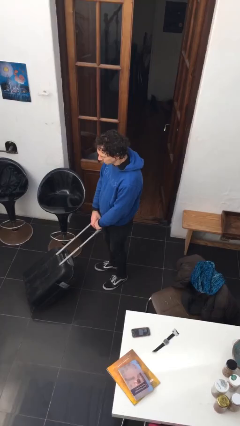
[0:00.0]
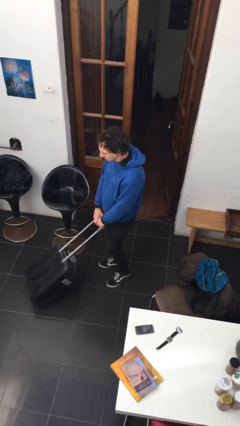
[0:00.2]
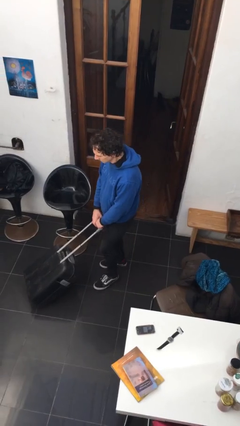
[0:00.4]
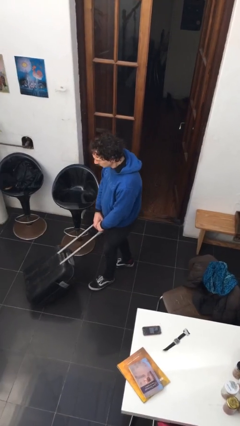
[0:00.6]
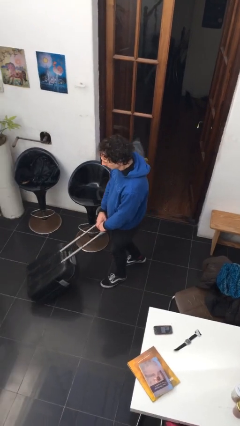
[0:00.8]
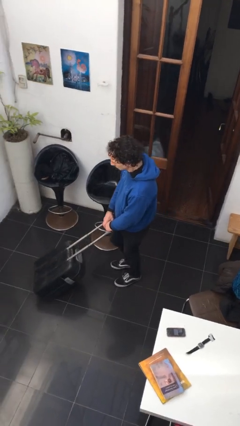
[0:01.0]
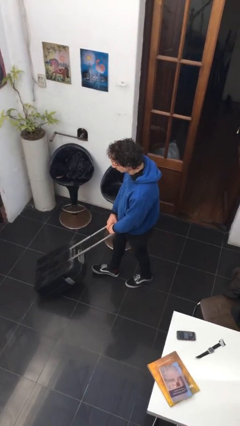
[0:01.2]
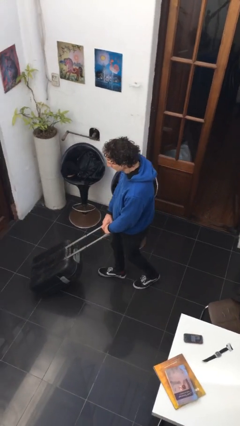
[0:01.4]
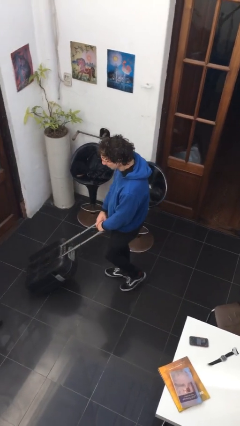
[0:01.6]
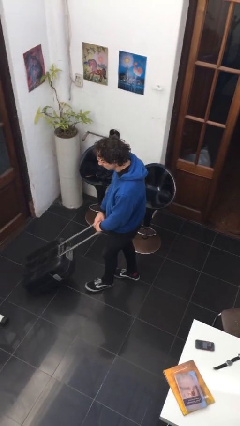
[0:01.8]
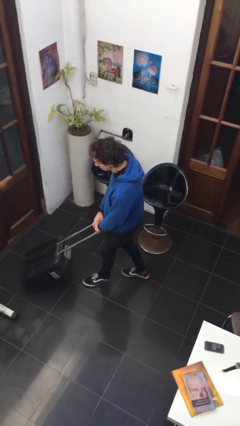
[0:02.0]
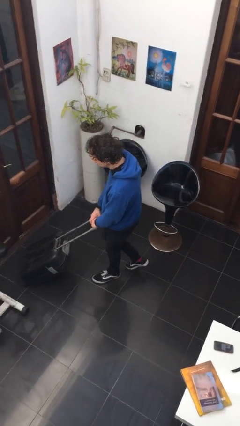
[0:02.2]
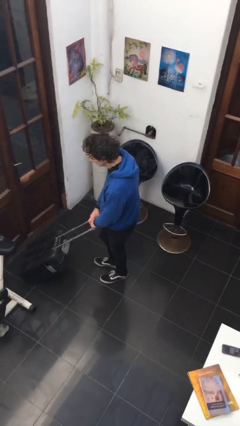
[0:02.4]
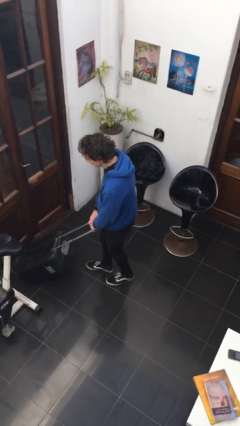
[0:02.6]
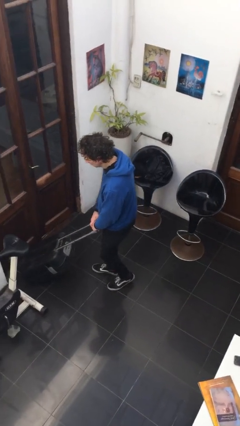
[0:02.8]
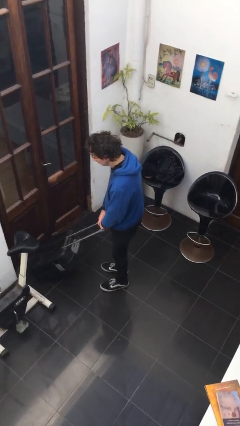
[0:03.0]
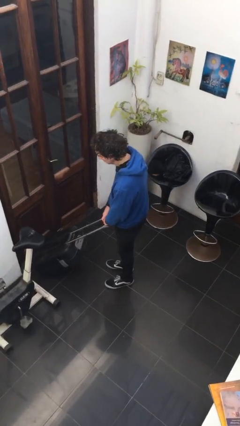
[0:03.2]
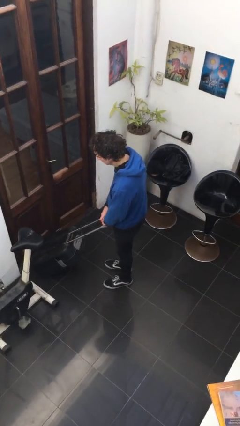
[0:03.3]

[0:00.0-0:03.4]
person pushes wheeled cart

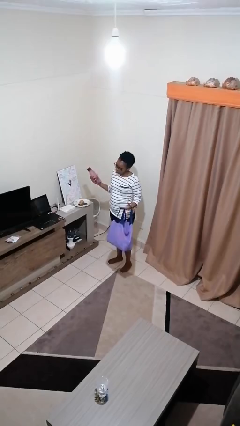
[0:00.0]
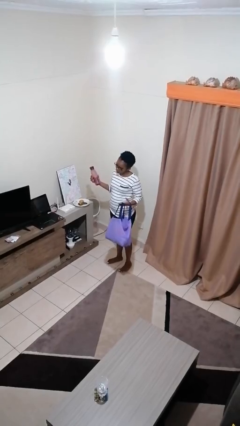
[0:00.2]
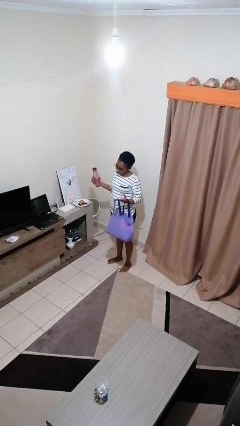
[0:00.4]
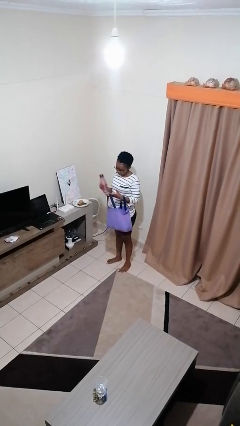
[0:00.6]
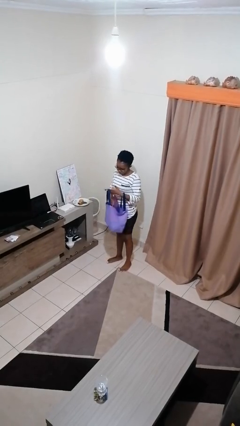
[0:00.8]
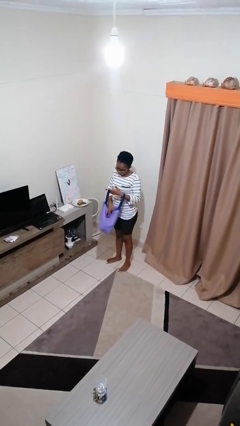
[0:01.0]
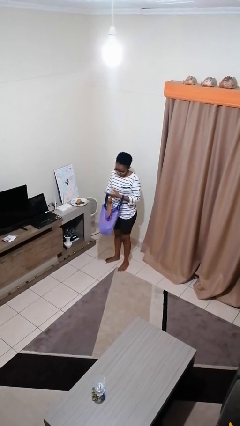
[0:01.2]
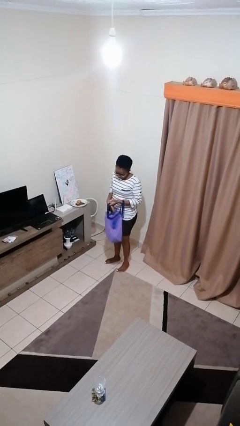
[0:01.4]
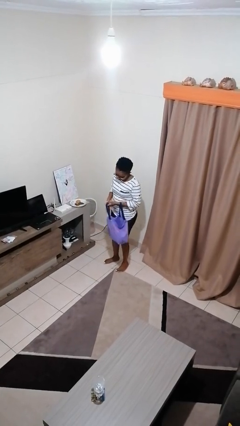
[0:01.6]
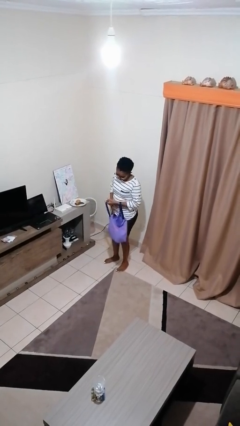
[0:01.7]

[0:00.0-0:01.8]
person puts object into bag

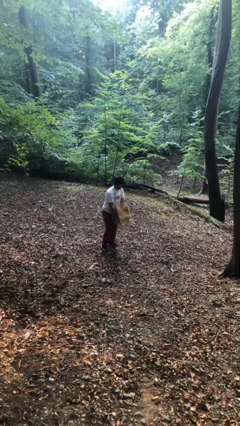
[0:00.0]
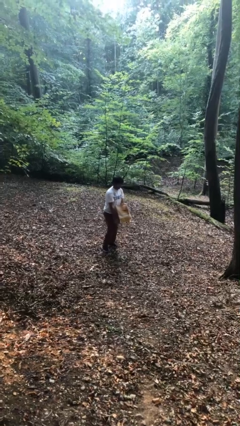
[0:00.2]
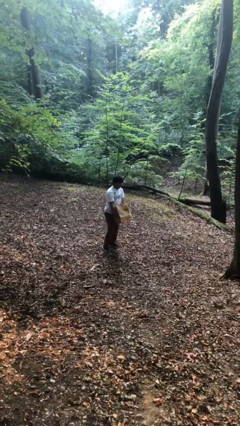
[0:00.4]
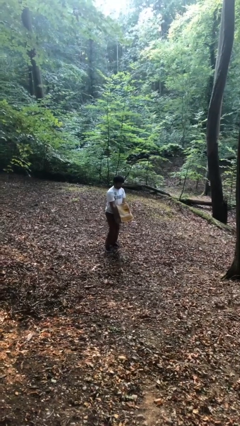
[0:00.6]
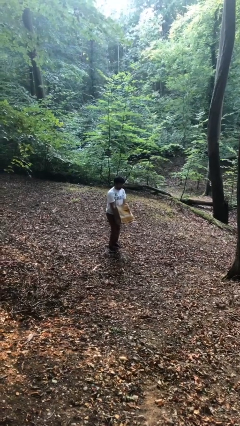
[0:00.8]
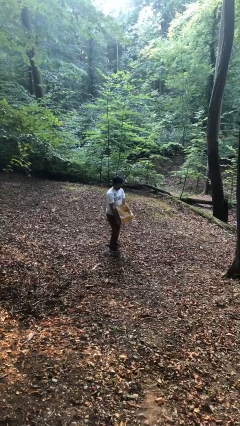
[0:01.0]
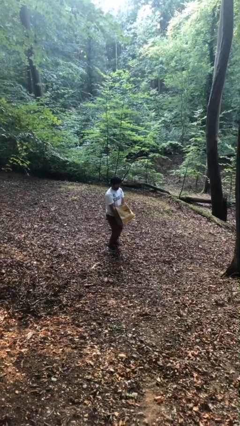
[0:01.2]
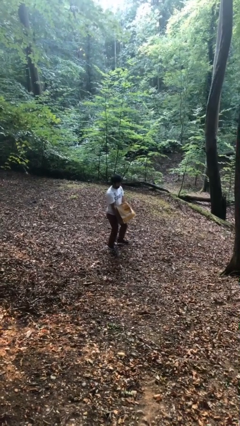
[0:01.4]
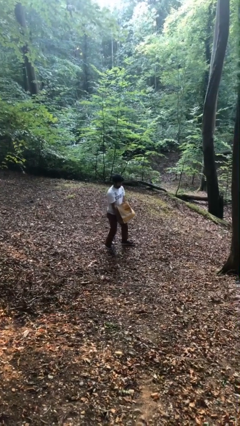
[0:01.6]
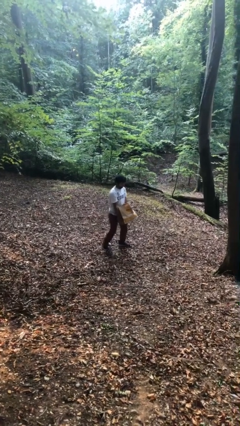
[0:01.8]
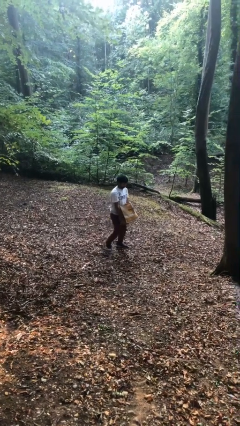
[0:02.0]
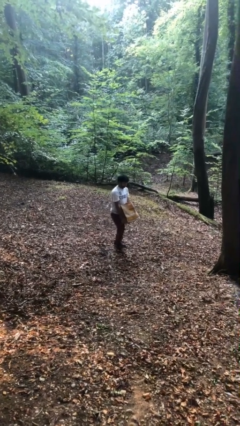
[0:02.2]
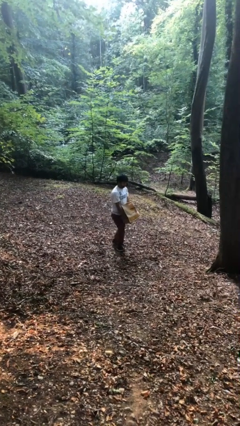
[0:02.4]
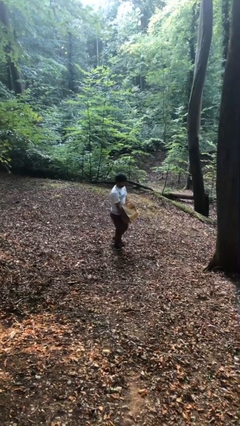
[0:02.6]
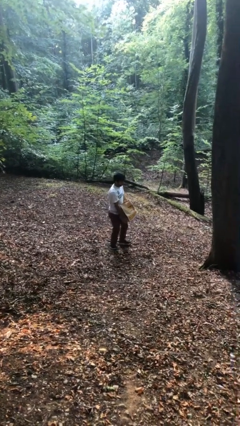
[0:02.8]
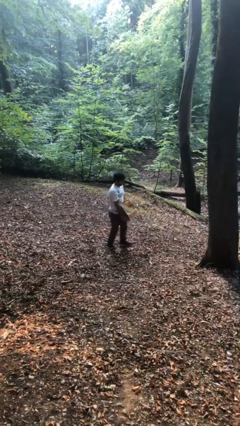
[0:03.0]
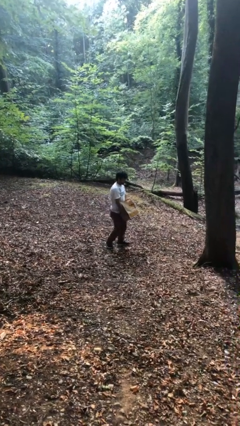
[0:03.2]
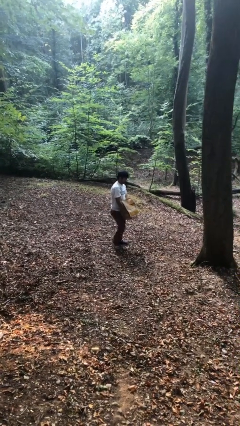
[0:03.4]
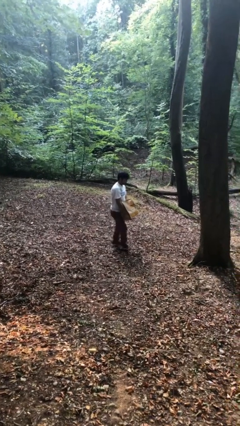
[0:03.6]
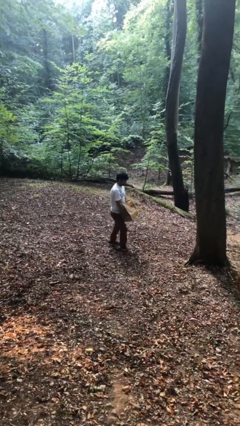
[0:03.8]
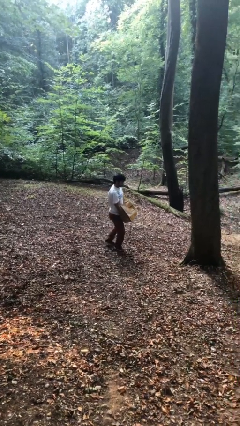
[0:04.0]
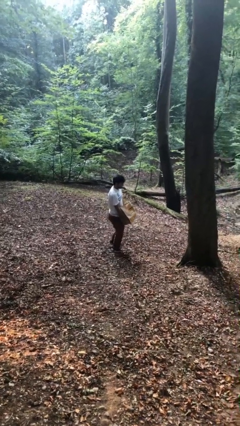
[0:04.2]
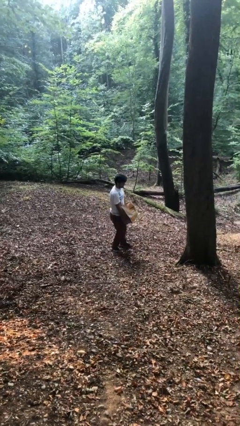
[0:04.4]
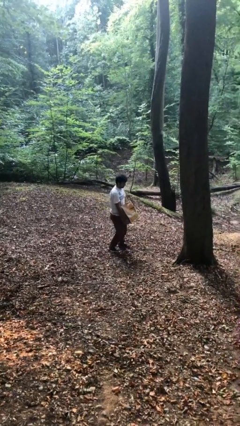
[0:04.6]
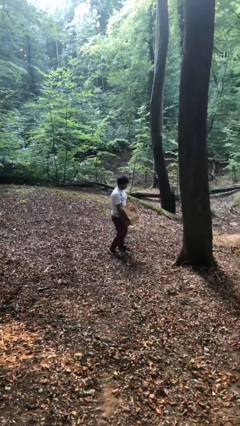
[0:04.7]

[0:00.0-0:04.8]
person carries heavy object

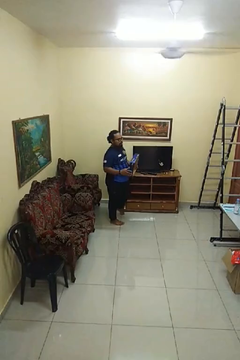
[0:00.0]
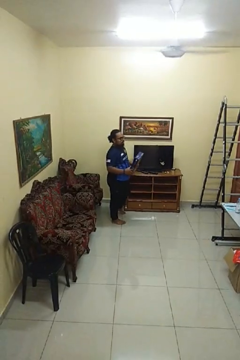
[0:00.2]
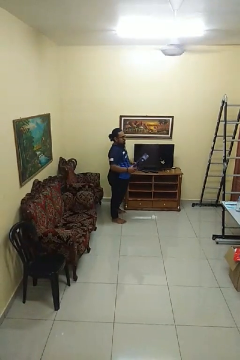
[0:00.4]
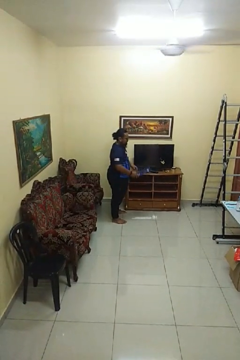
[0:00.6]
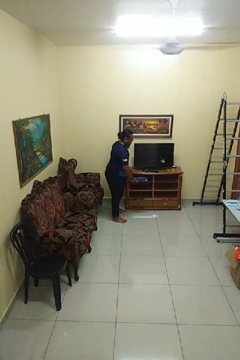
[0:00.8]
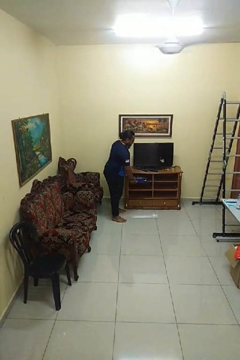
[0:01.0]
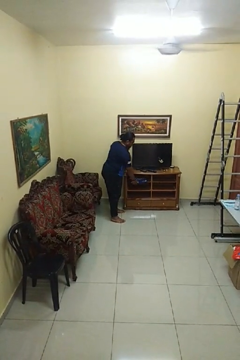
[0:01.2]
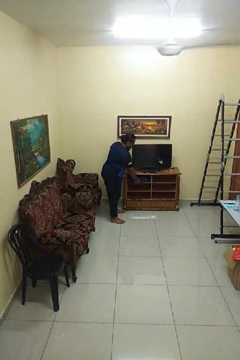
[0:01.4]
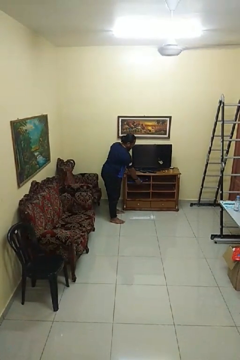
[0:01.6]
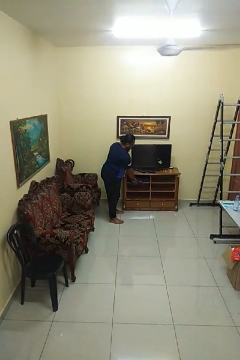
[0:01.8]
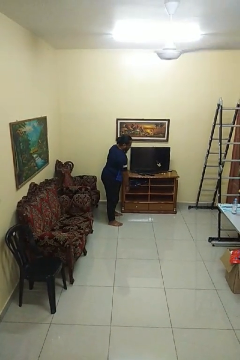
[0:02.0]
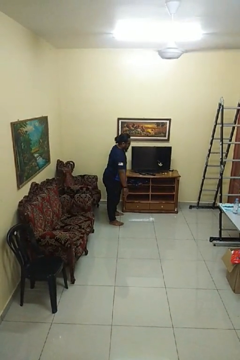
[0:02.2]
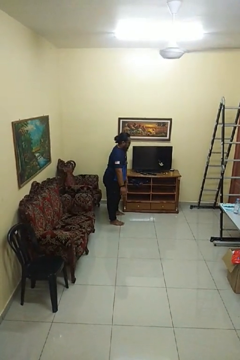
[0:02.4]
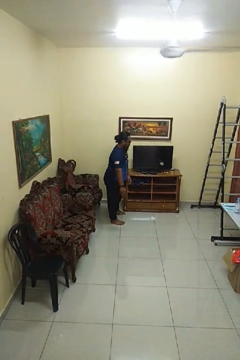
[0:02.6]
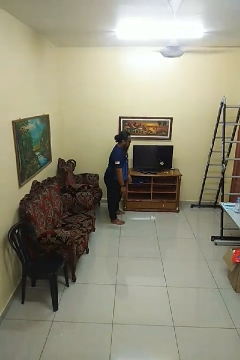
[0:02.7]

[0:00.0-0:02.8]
person puts down object into cabinet

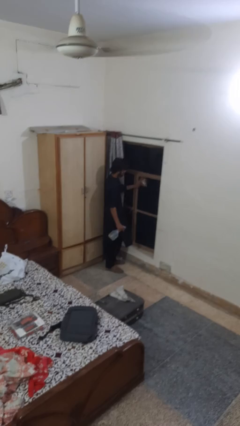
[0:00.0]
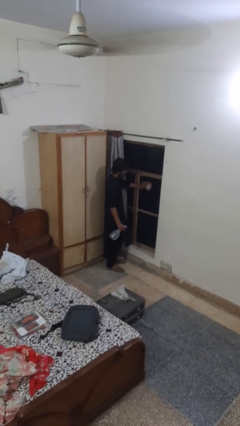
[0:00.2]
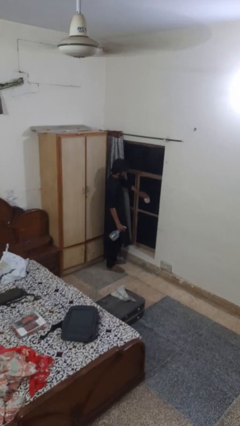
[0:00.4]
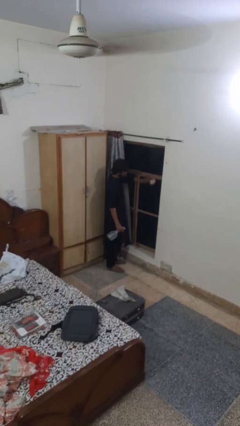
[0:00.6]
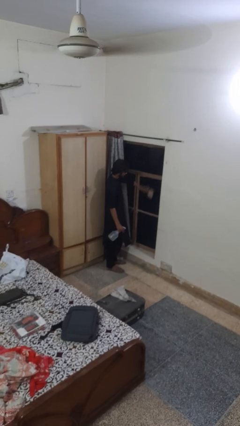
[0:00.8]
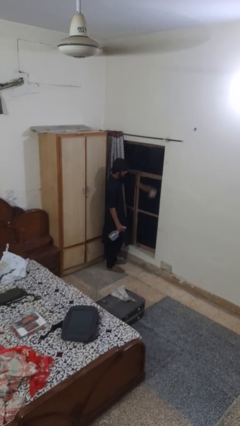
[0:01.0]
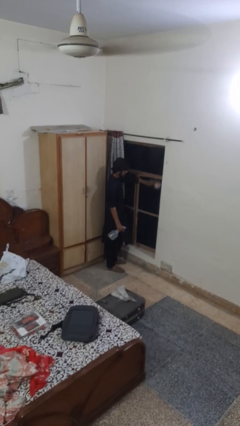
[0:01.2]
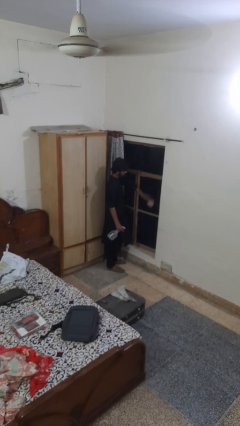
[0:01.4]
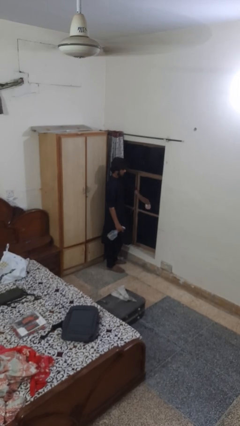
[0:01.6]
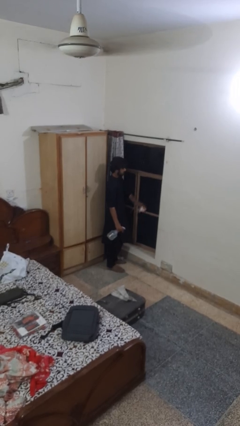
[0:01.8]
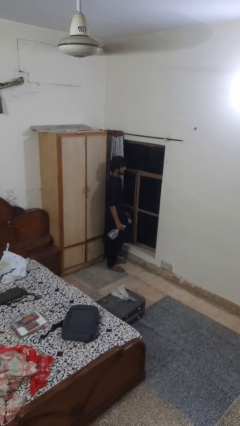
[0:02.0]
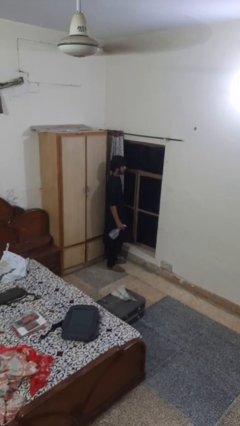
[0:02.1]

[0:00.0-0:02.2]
person washes window

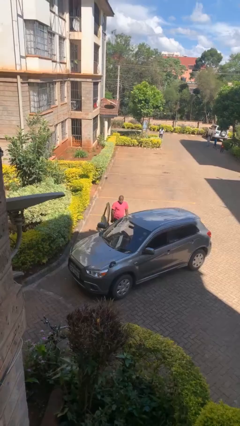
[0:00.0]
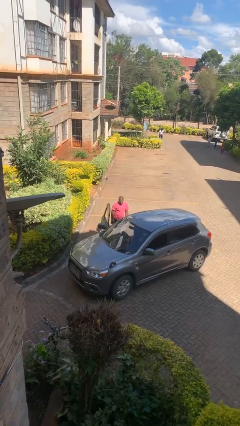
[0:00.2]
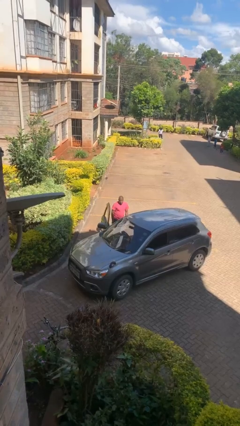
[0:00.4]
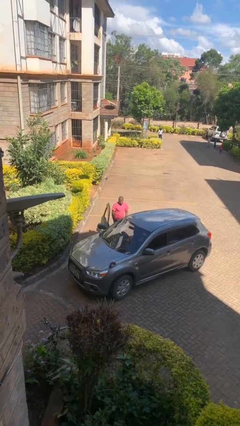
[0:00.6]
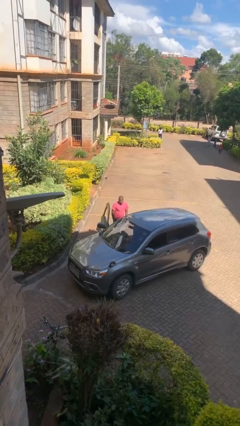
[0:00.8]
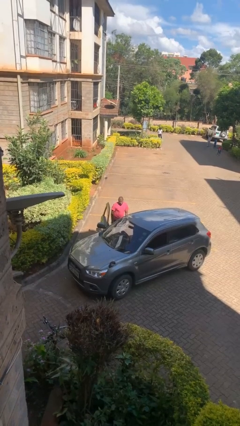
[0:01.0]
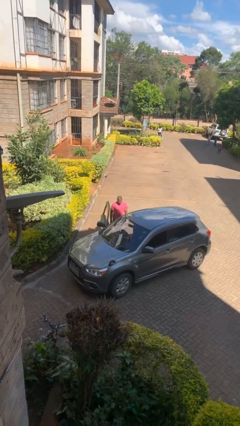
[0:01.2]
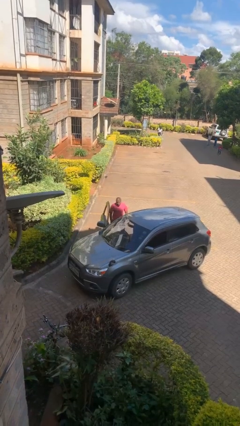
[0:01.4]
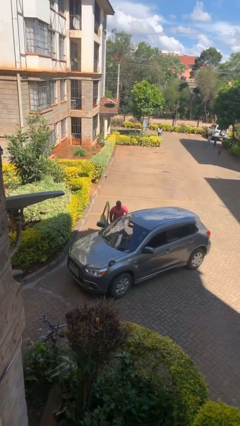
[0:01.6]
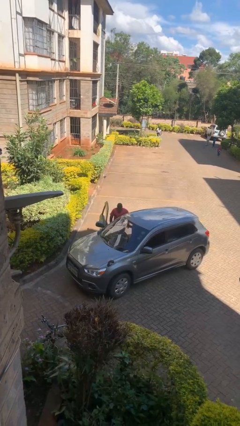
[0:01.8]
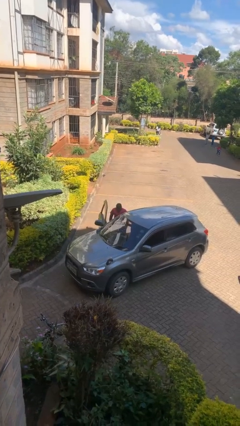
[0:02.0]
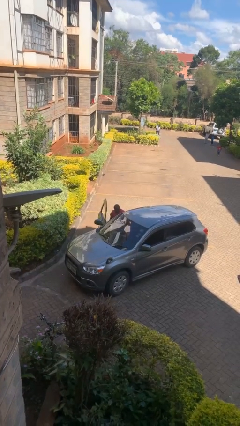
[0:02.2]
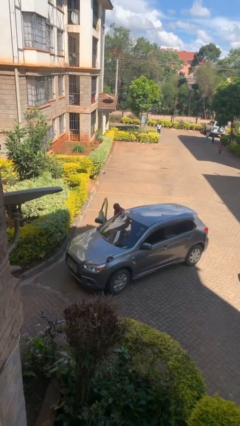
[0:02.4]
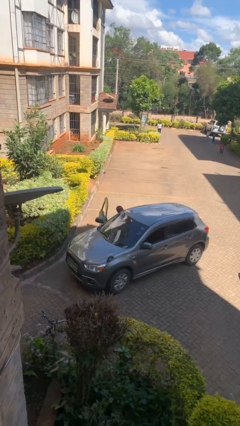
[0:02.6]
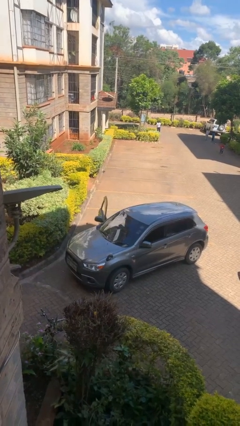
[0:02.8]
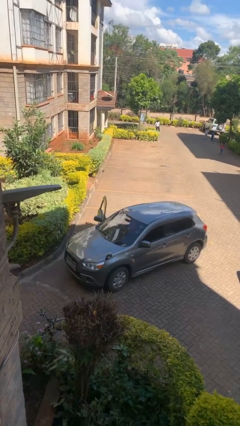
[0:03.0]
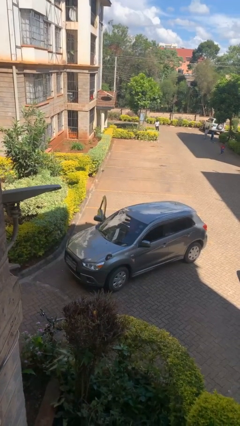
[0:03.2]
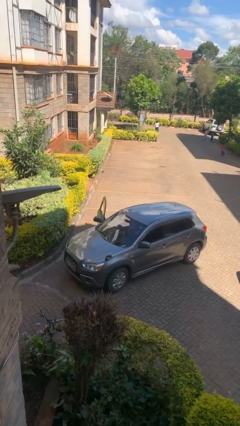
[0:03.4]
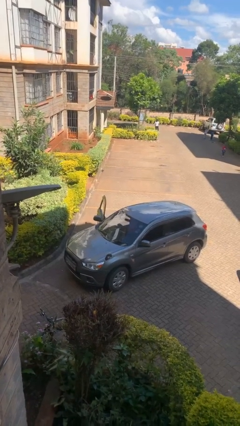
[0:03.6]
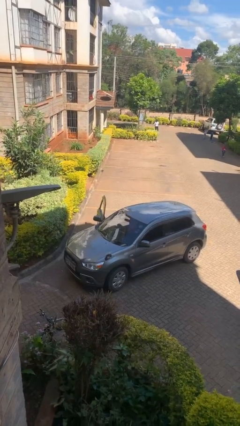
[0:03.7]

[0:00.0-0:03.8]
person enters car
